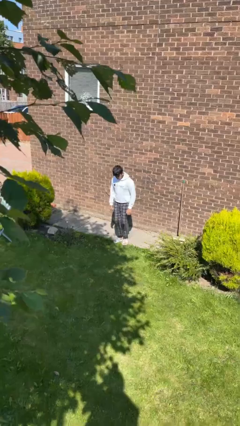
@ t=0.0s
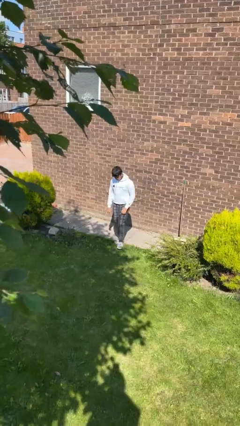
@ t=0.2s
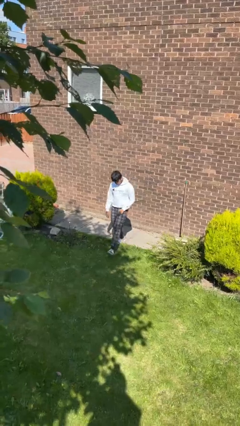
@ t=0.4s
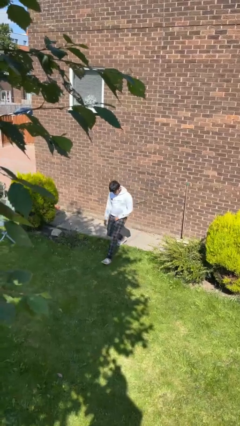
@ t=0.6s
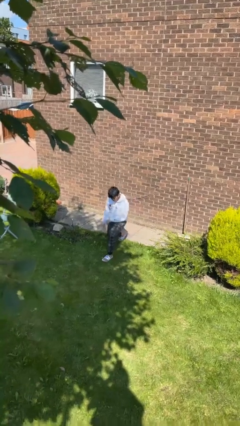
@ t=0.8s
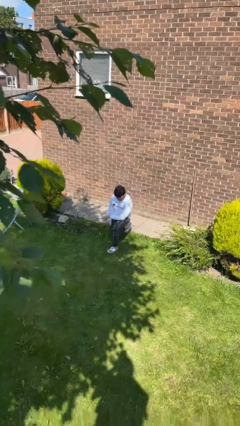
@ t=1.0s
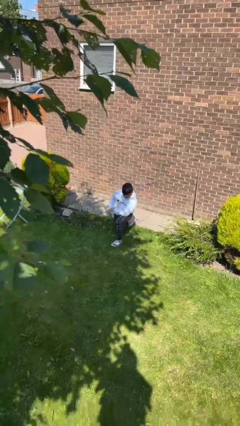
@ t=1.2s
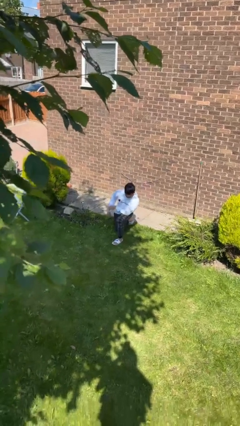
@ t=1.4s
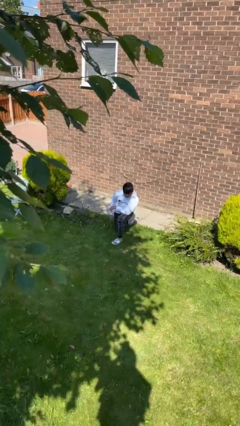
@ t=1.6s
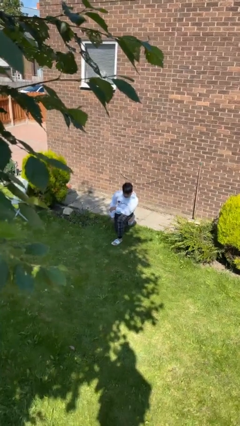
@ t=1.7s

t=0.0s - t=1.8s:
person kneels

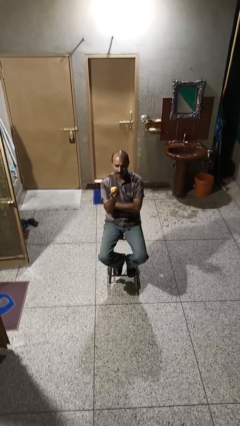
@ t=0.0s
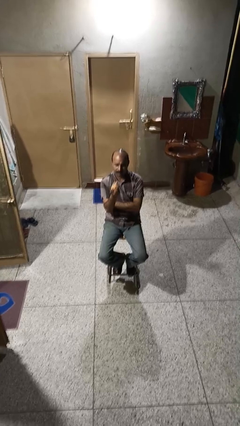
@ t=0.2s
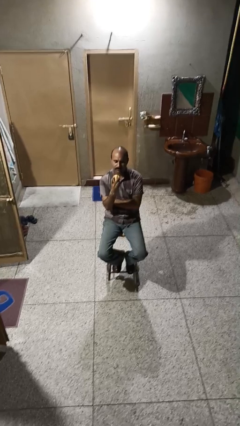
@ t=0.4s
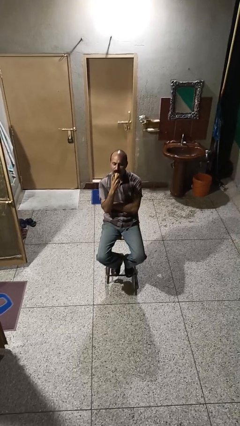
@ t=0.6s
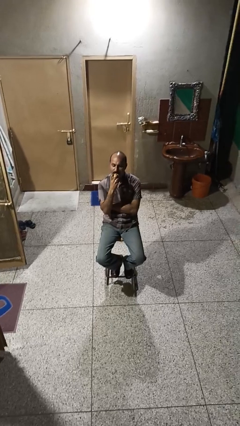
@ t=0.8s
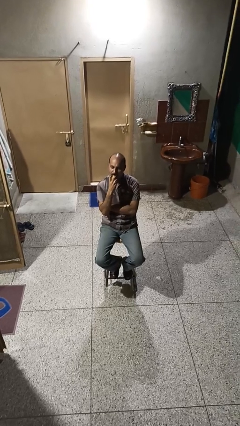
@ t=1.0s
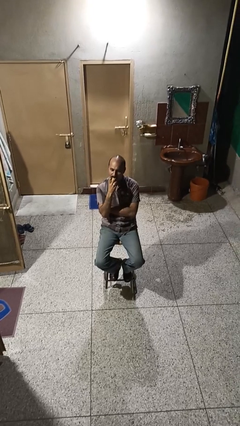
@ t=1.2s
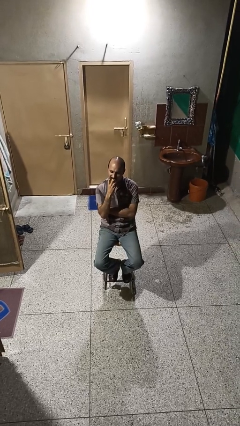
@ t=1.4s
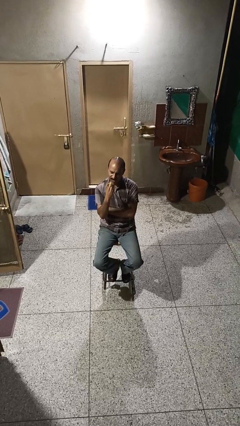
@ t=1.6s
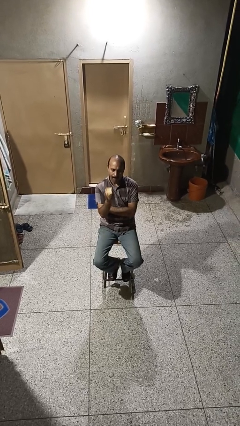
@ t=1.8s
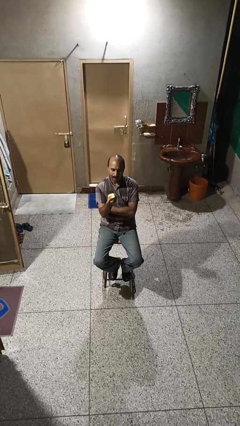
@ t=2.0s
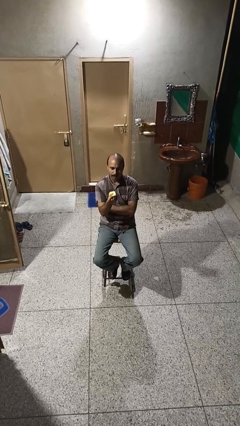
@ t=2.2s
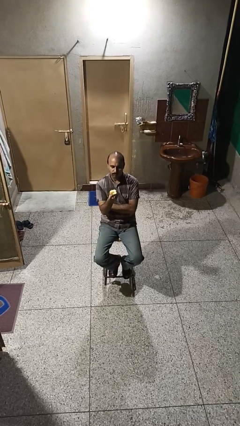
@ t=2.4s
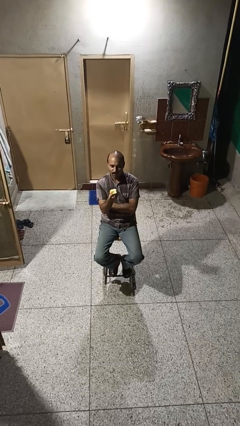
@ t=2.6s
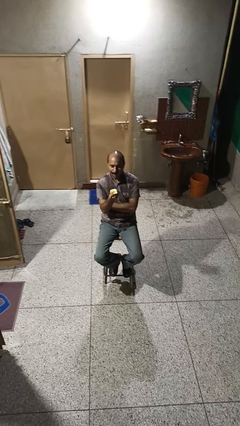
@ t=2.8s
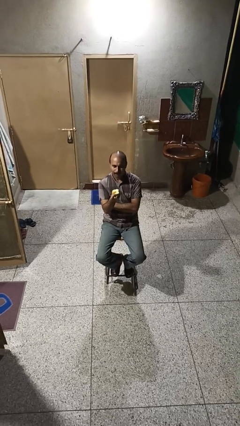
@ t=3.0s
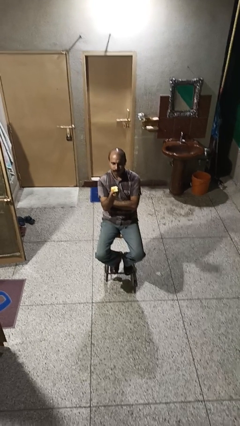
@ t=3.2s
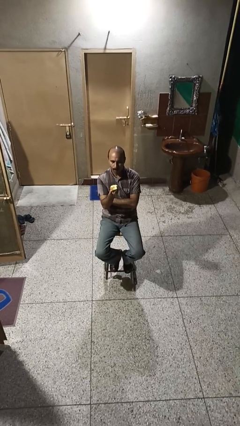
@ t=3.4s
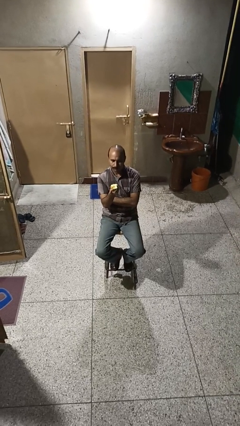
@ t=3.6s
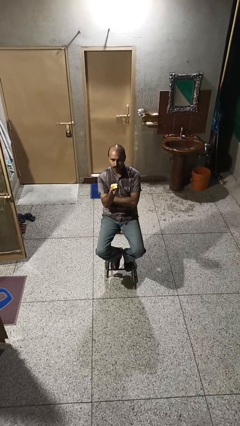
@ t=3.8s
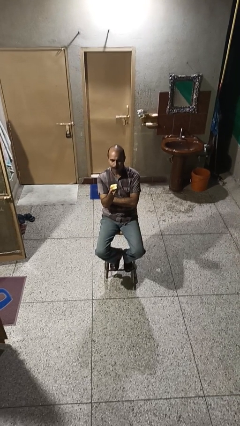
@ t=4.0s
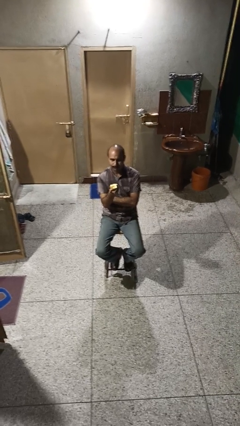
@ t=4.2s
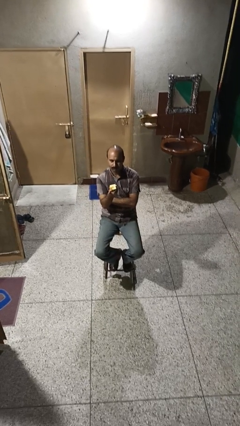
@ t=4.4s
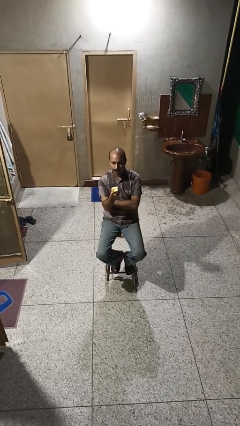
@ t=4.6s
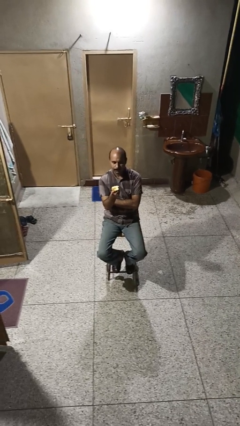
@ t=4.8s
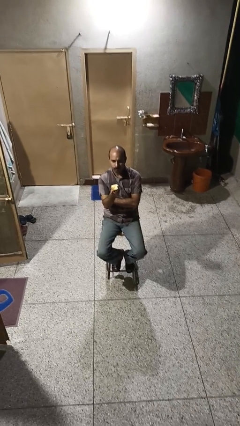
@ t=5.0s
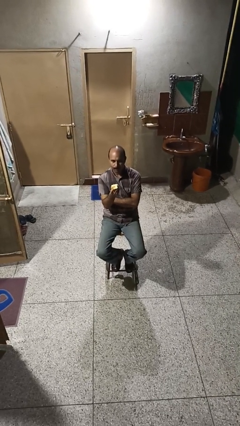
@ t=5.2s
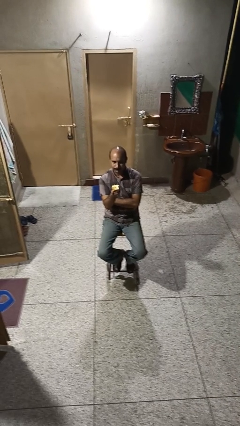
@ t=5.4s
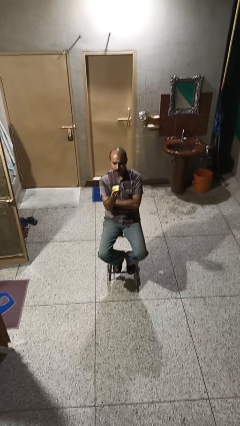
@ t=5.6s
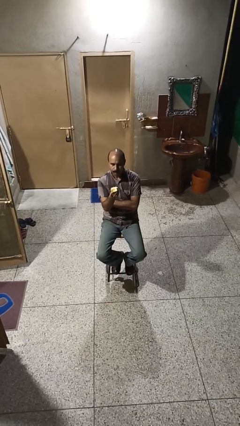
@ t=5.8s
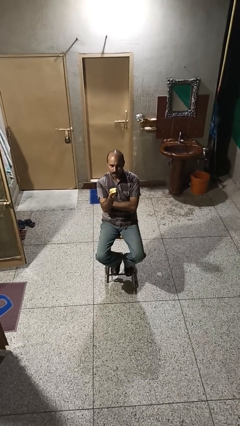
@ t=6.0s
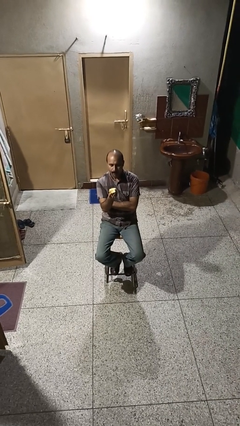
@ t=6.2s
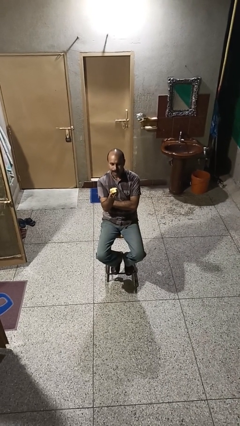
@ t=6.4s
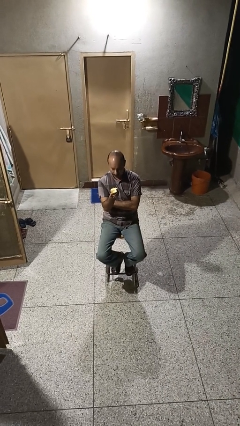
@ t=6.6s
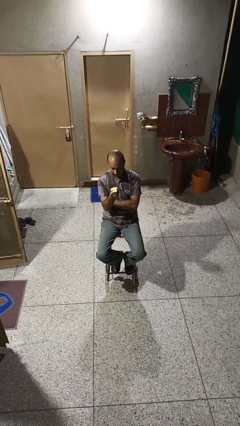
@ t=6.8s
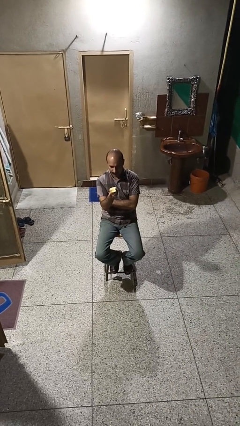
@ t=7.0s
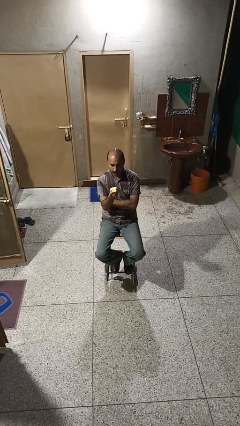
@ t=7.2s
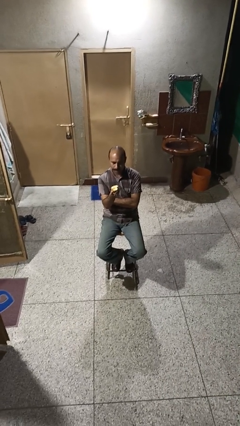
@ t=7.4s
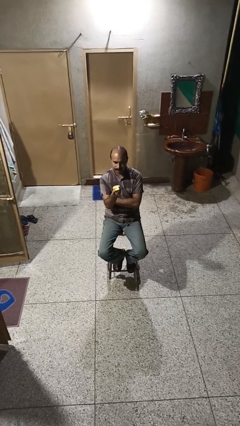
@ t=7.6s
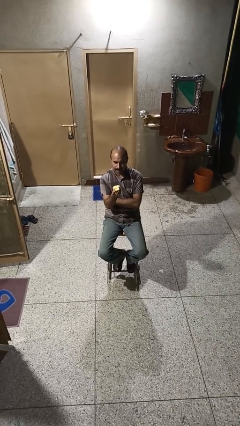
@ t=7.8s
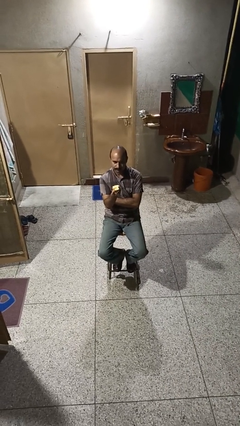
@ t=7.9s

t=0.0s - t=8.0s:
person eats apple

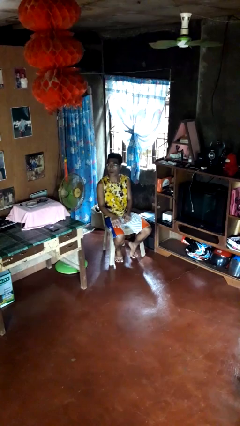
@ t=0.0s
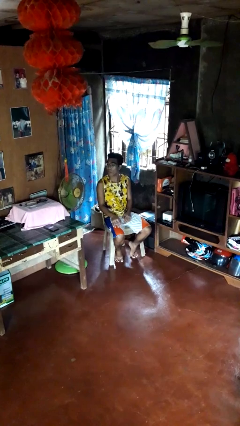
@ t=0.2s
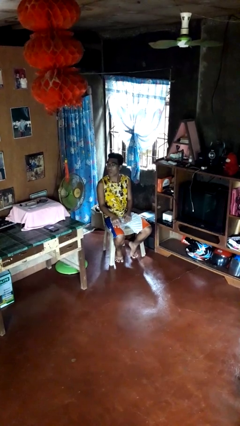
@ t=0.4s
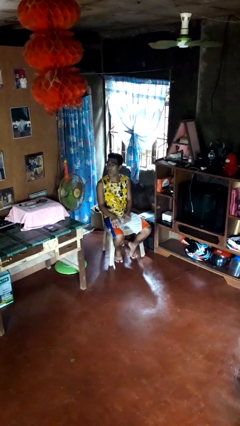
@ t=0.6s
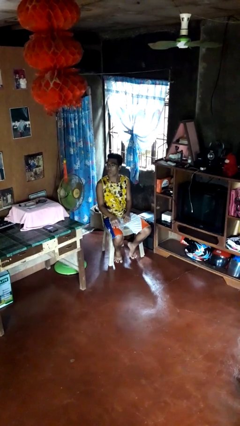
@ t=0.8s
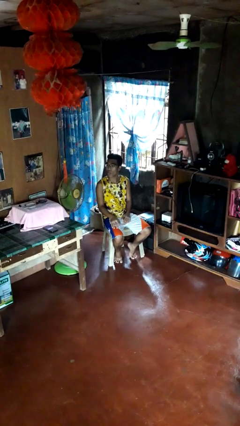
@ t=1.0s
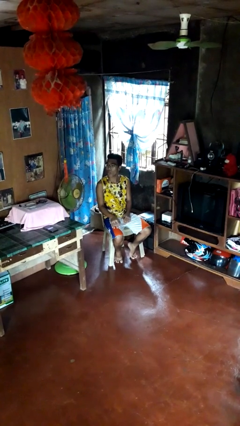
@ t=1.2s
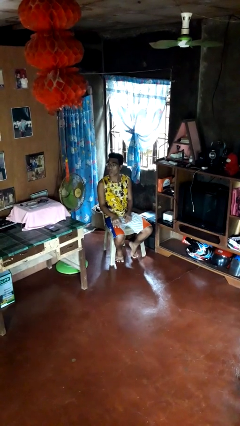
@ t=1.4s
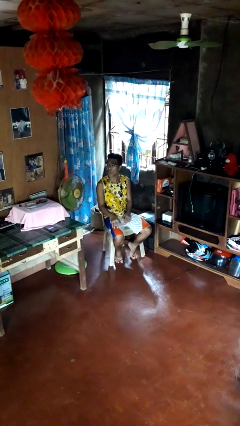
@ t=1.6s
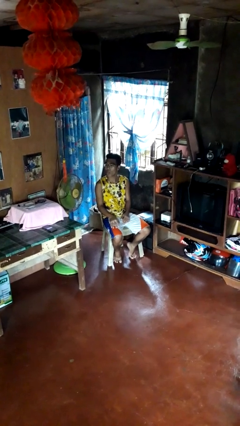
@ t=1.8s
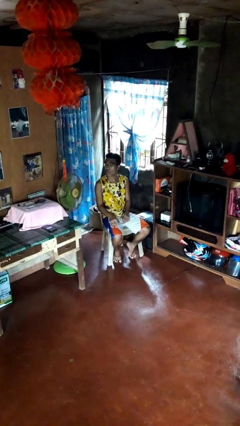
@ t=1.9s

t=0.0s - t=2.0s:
person sticks out tongue

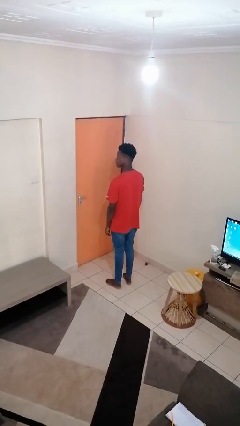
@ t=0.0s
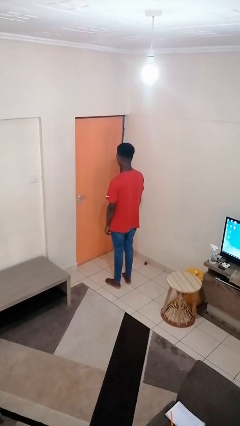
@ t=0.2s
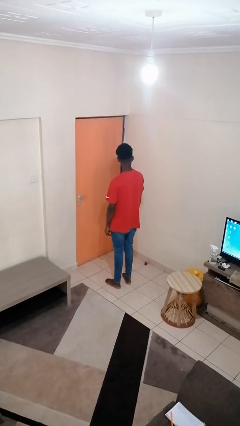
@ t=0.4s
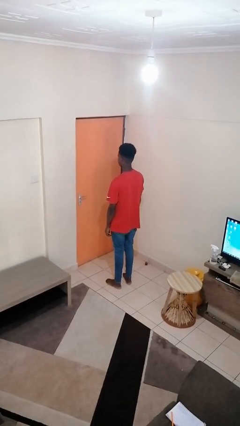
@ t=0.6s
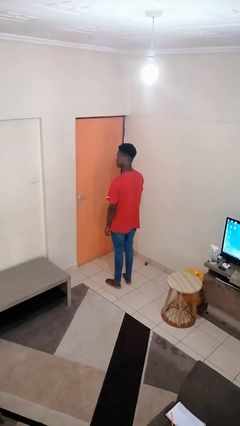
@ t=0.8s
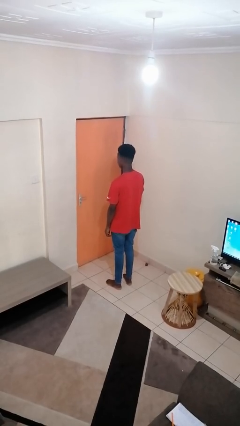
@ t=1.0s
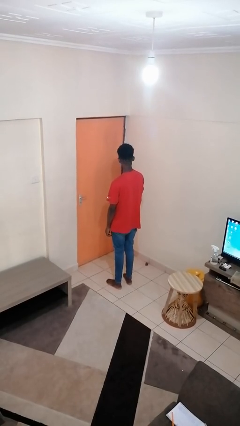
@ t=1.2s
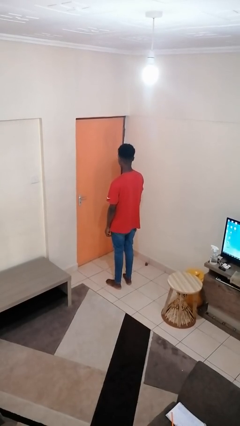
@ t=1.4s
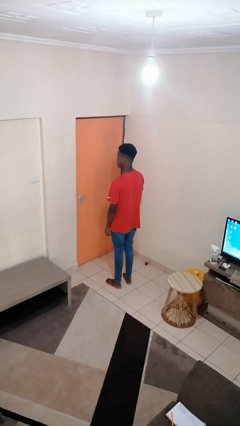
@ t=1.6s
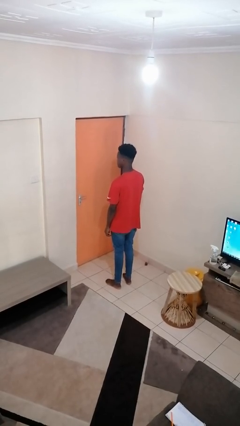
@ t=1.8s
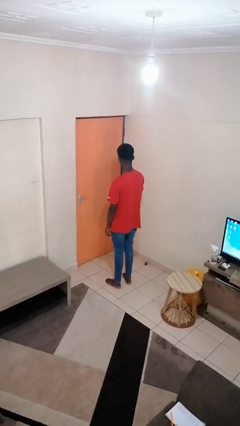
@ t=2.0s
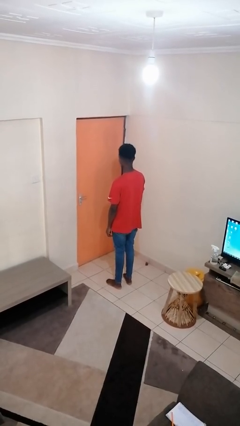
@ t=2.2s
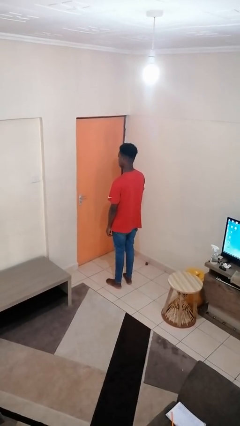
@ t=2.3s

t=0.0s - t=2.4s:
person shakes head

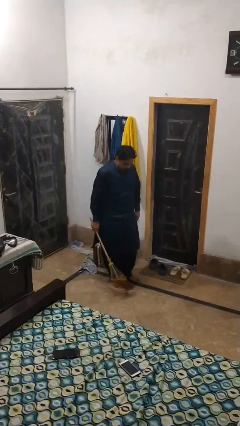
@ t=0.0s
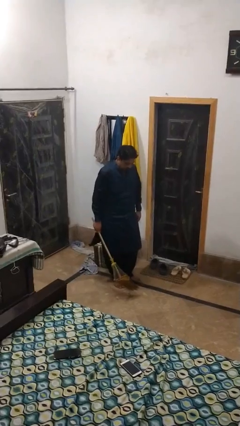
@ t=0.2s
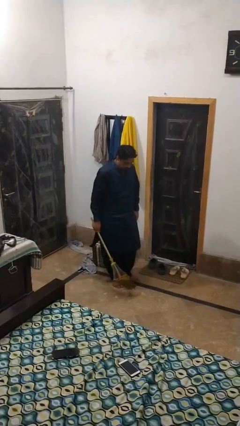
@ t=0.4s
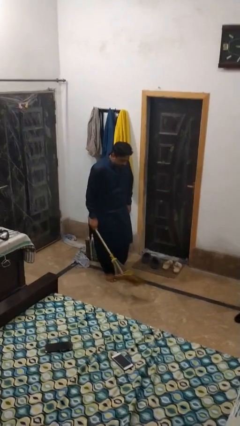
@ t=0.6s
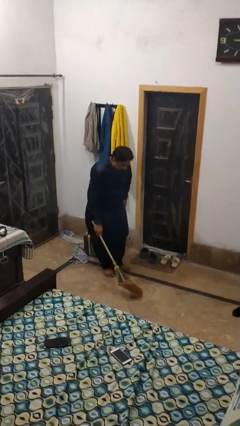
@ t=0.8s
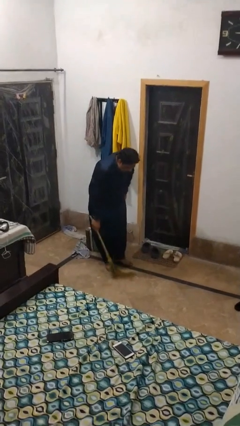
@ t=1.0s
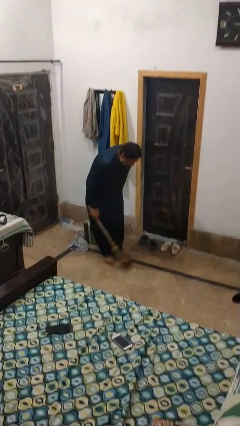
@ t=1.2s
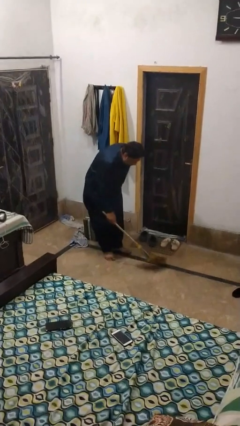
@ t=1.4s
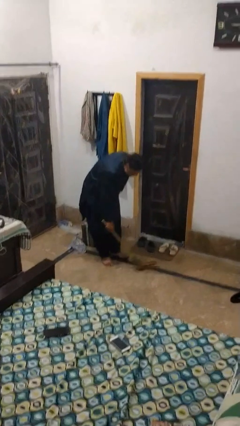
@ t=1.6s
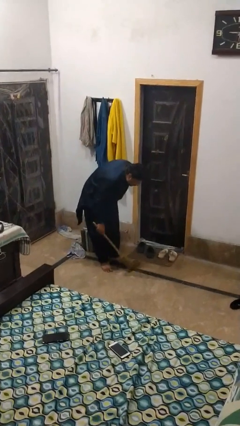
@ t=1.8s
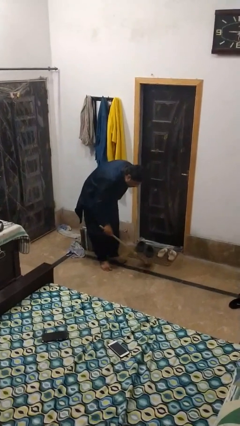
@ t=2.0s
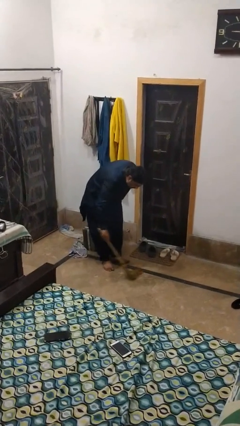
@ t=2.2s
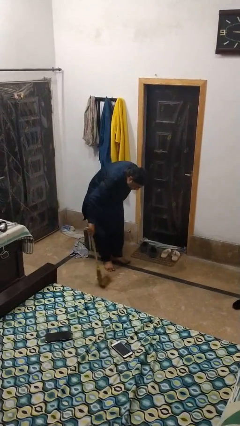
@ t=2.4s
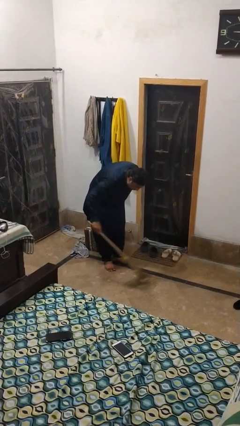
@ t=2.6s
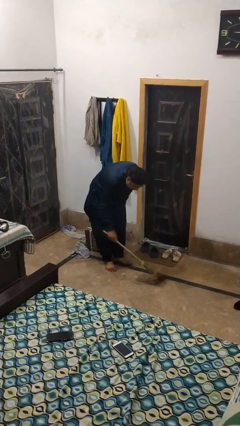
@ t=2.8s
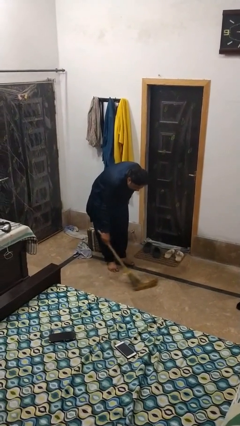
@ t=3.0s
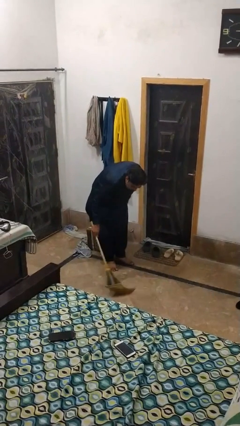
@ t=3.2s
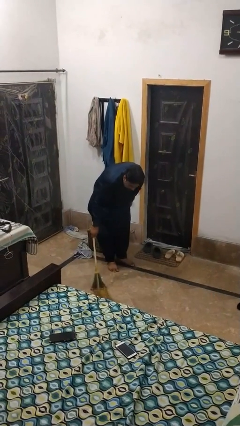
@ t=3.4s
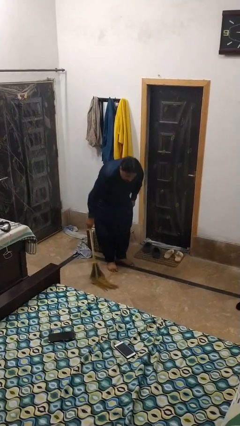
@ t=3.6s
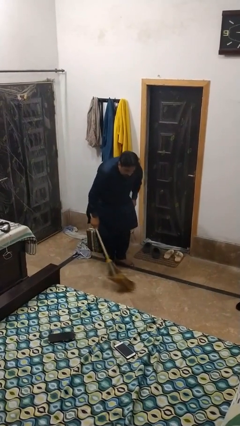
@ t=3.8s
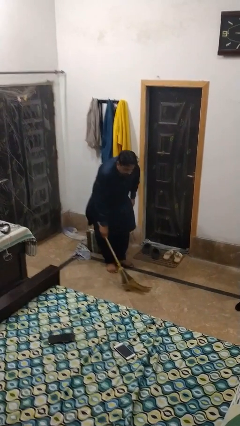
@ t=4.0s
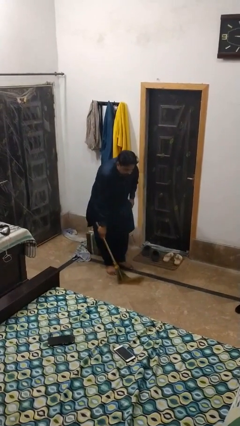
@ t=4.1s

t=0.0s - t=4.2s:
person sweeps floor
